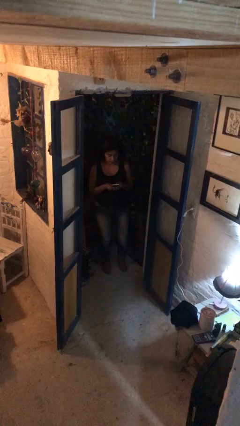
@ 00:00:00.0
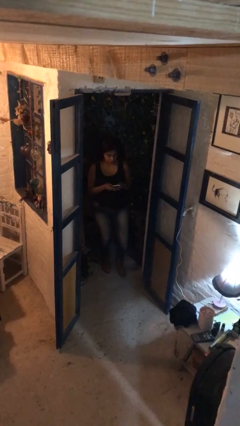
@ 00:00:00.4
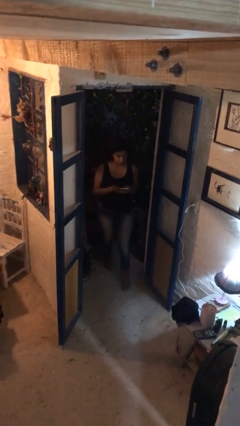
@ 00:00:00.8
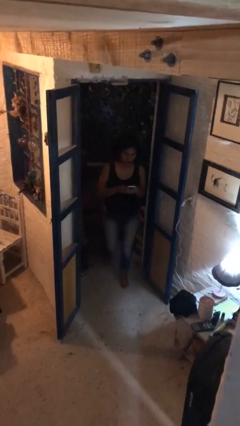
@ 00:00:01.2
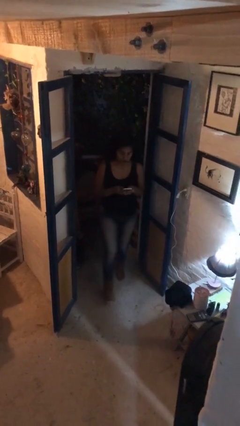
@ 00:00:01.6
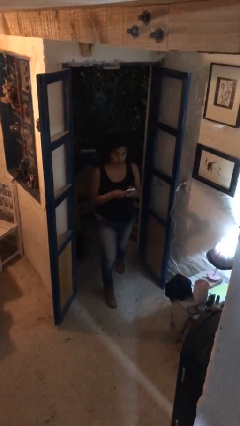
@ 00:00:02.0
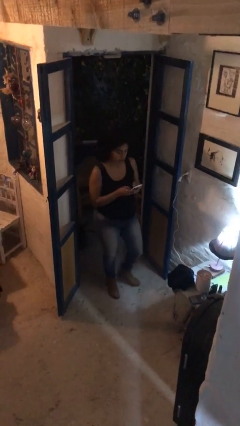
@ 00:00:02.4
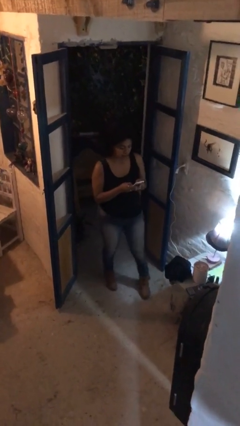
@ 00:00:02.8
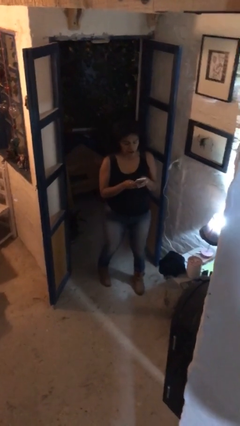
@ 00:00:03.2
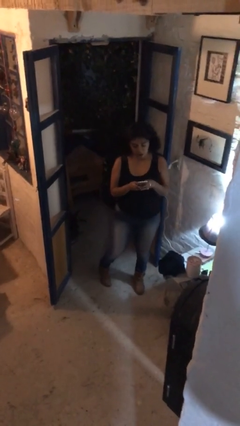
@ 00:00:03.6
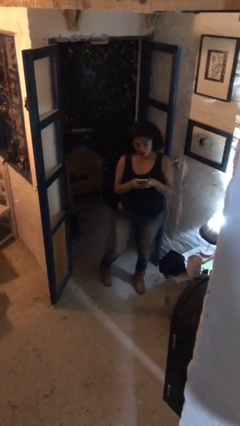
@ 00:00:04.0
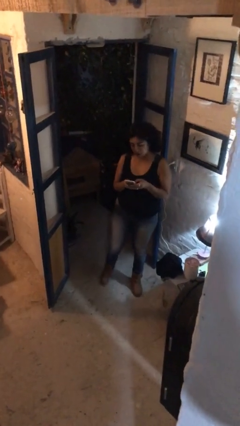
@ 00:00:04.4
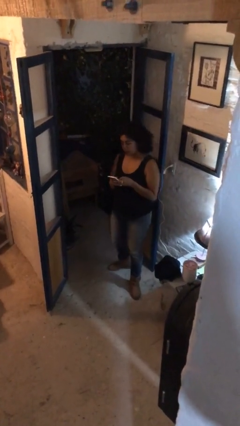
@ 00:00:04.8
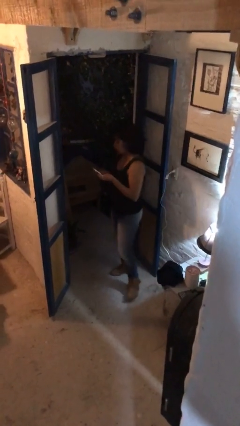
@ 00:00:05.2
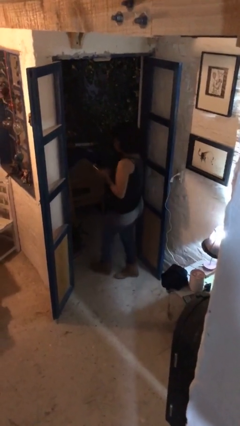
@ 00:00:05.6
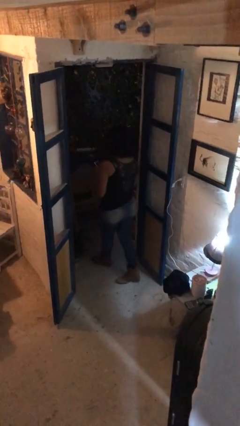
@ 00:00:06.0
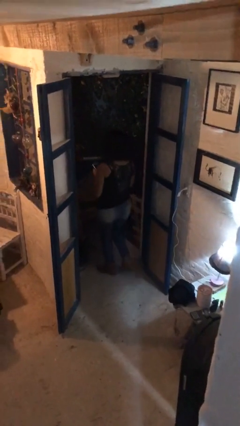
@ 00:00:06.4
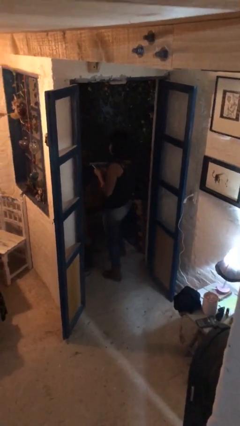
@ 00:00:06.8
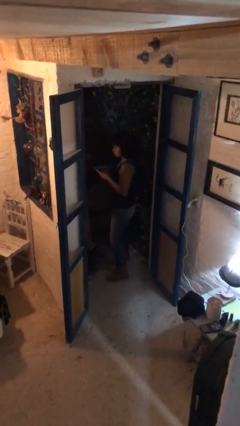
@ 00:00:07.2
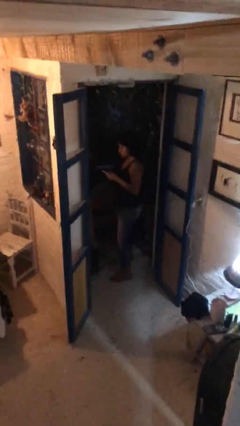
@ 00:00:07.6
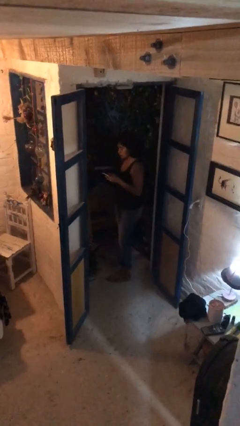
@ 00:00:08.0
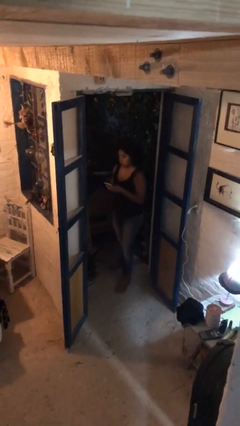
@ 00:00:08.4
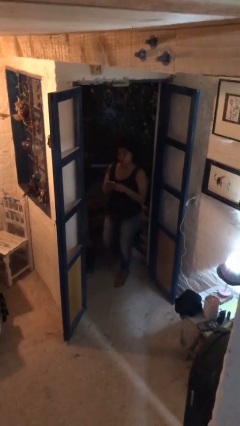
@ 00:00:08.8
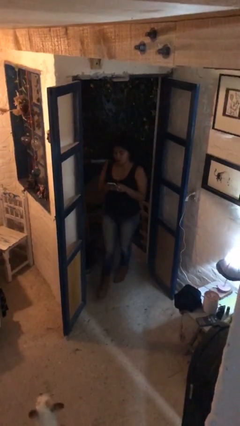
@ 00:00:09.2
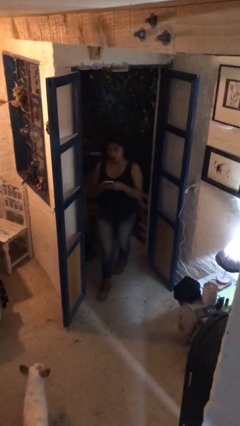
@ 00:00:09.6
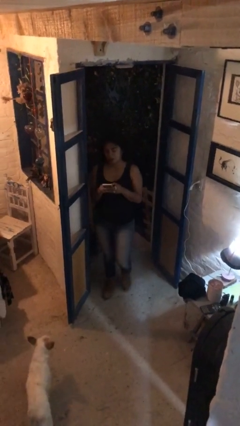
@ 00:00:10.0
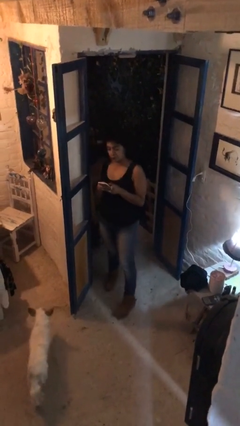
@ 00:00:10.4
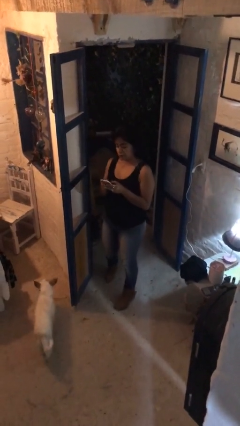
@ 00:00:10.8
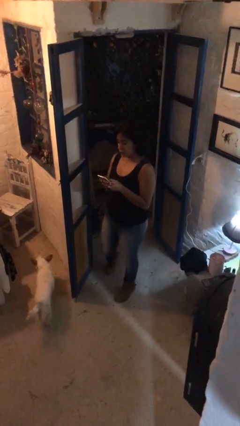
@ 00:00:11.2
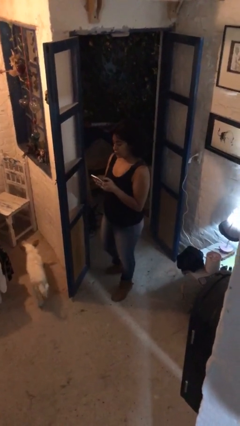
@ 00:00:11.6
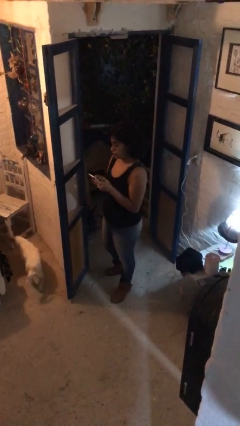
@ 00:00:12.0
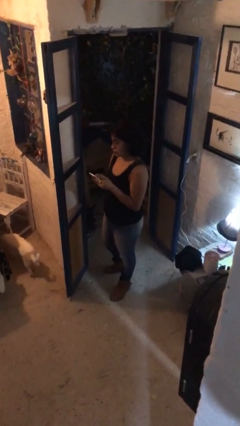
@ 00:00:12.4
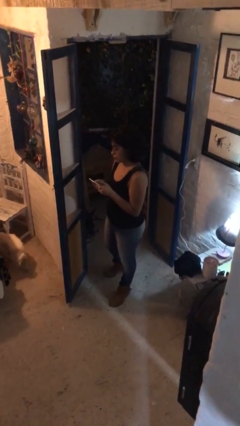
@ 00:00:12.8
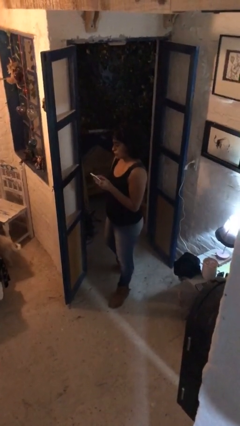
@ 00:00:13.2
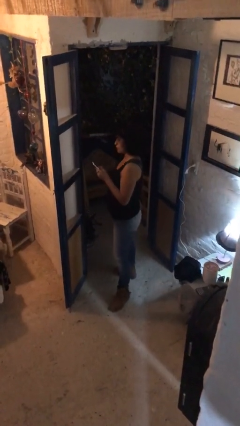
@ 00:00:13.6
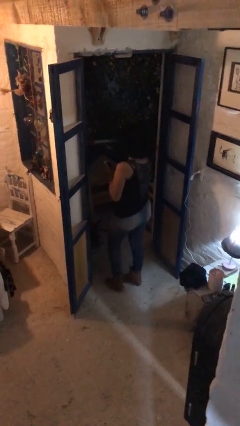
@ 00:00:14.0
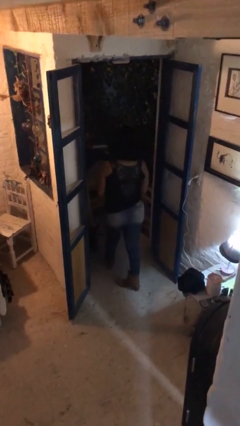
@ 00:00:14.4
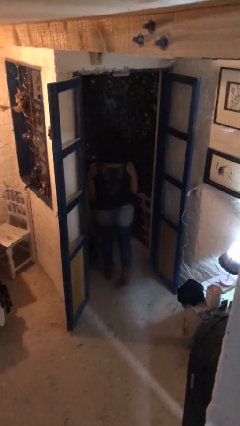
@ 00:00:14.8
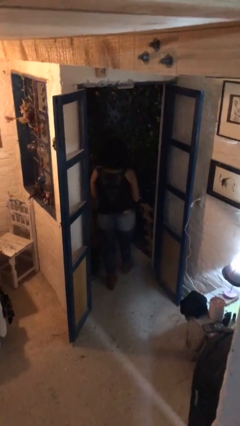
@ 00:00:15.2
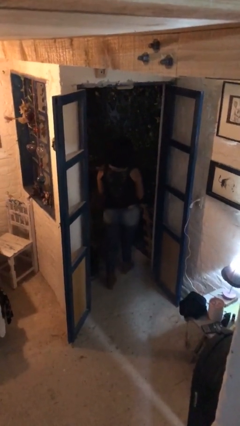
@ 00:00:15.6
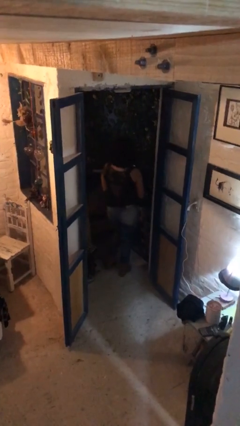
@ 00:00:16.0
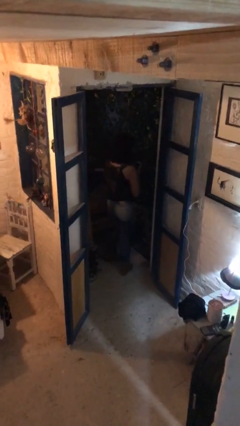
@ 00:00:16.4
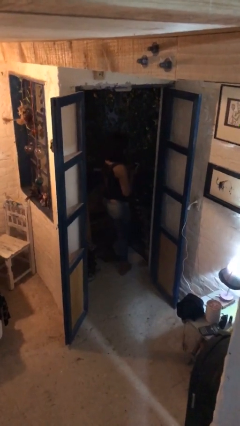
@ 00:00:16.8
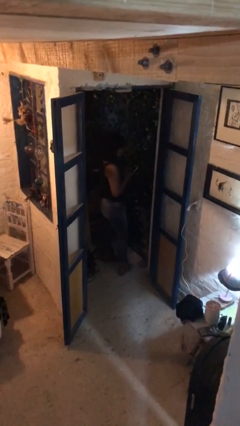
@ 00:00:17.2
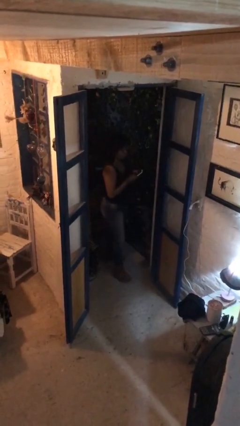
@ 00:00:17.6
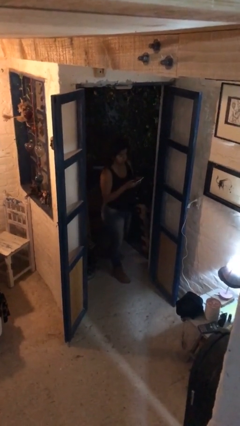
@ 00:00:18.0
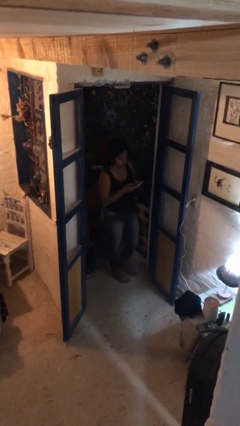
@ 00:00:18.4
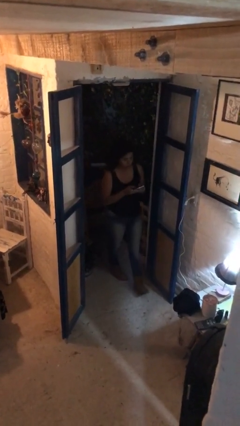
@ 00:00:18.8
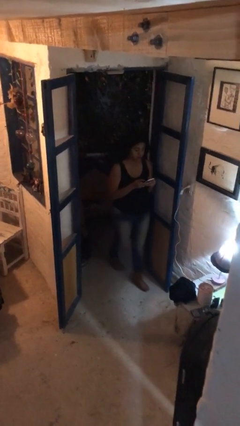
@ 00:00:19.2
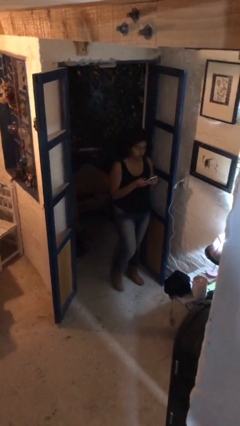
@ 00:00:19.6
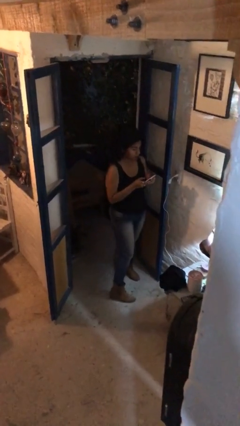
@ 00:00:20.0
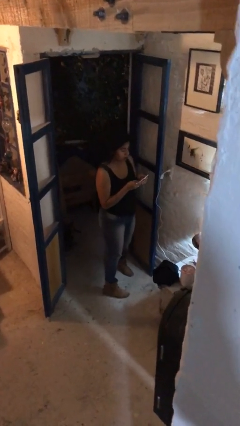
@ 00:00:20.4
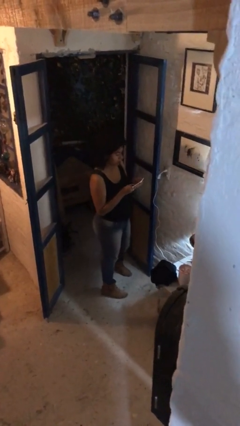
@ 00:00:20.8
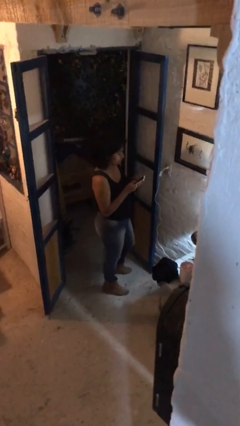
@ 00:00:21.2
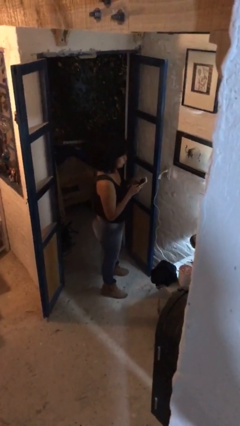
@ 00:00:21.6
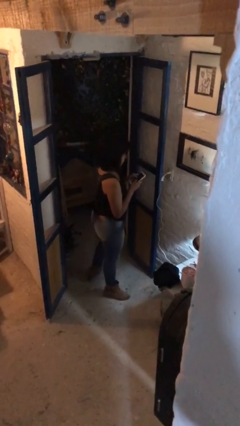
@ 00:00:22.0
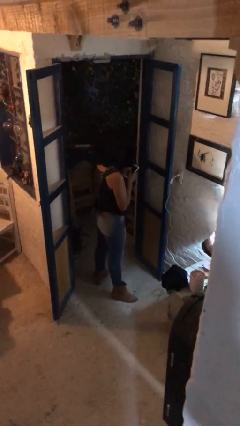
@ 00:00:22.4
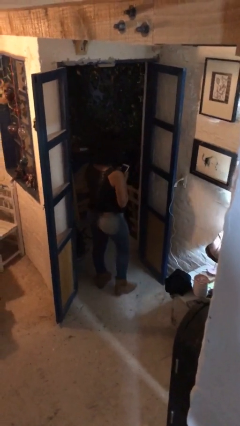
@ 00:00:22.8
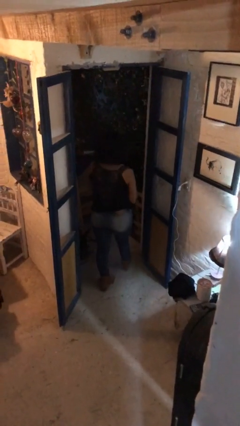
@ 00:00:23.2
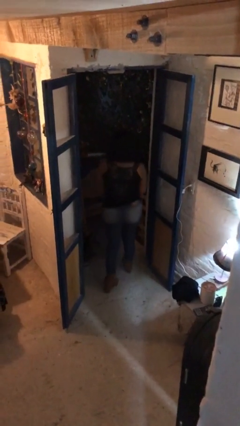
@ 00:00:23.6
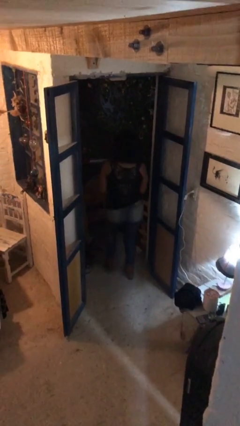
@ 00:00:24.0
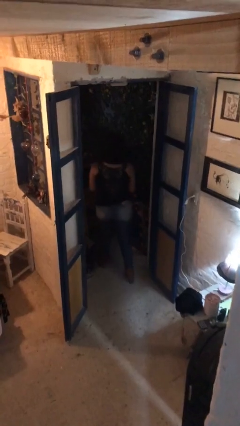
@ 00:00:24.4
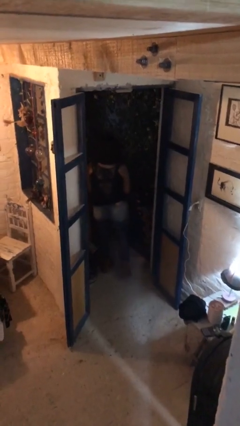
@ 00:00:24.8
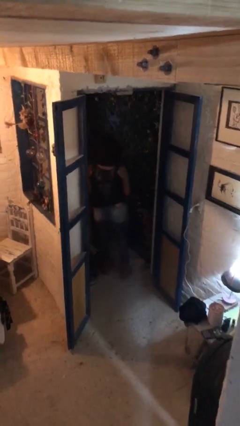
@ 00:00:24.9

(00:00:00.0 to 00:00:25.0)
person texts on phone

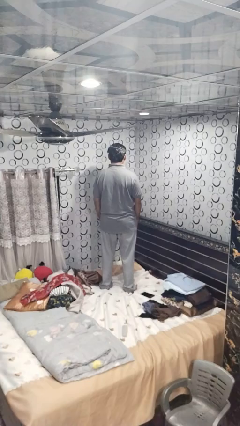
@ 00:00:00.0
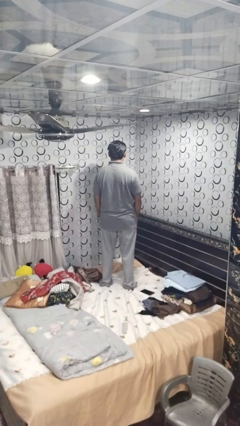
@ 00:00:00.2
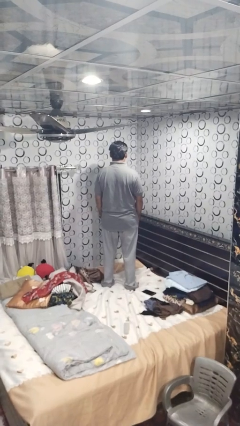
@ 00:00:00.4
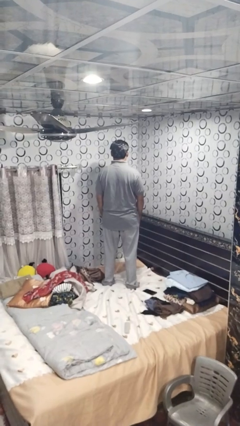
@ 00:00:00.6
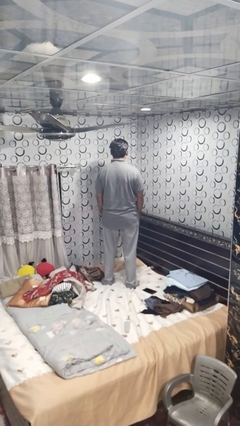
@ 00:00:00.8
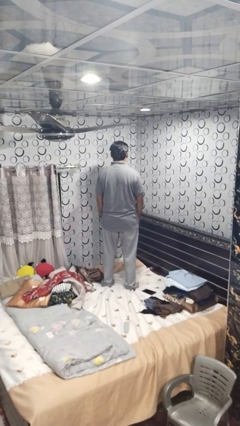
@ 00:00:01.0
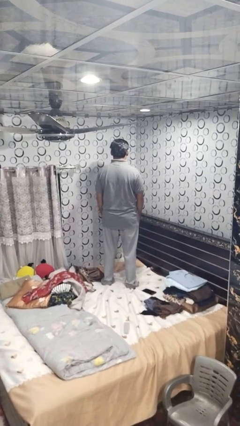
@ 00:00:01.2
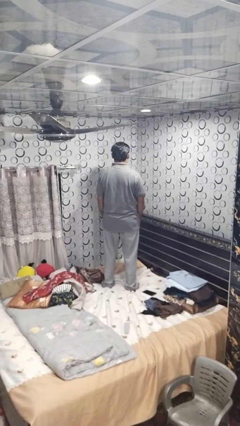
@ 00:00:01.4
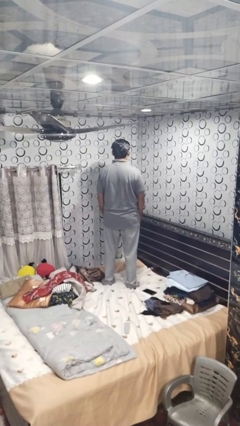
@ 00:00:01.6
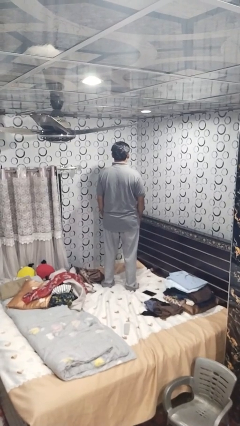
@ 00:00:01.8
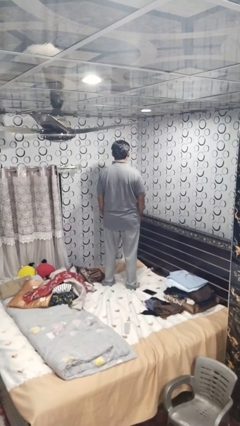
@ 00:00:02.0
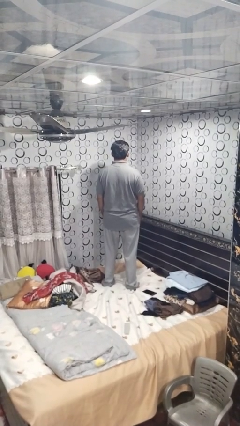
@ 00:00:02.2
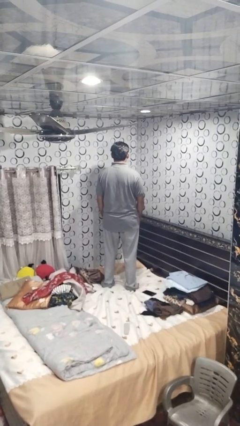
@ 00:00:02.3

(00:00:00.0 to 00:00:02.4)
person jumps on bed

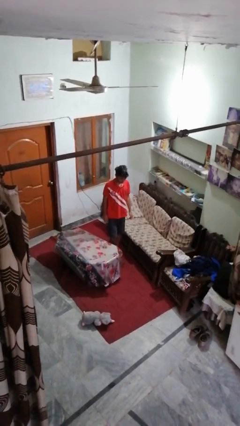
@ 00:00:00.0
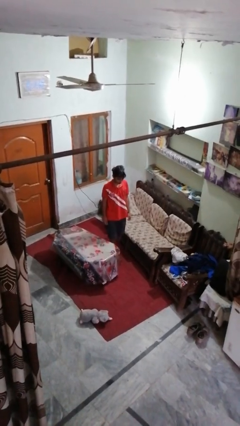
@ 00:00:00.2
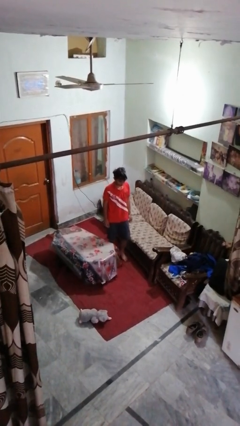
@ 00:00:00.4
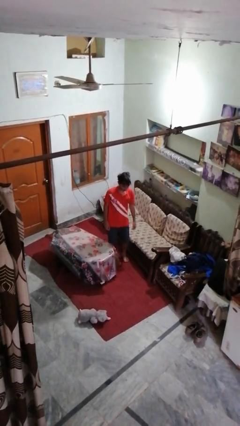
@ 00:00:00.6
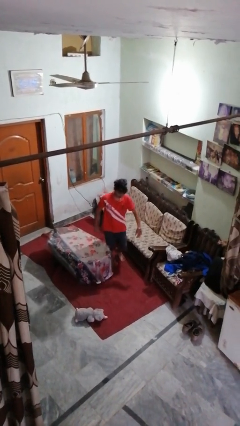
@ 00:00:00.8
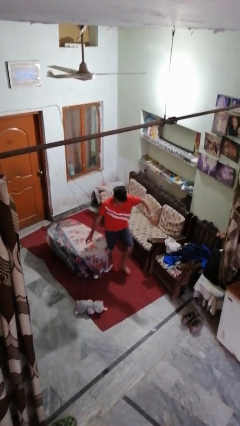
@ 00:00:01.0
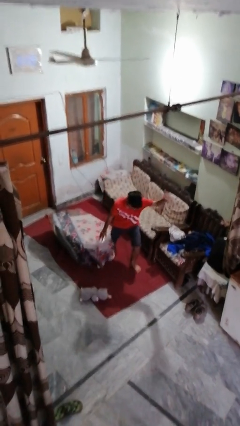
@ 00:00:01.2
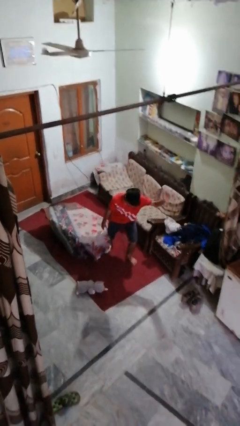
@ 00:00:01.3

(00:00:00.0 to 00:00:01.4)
person trips on object on floor

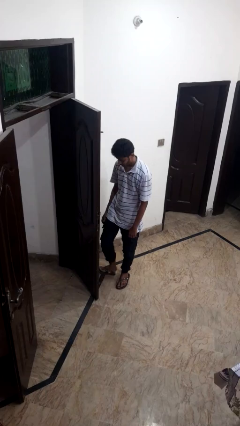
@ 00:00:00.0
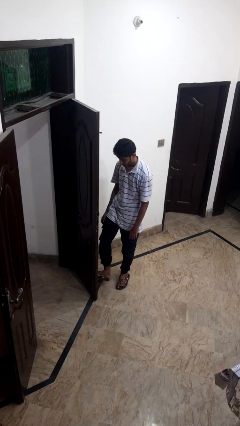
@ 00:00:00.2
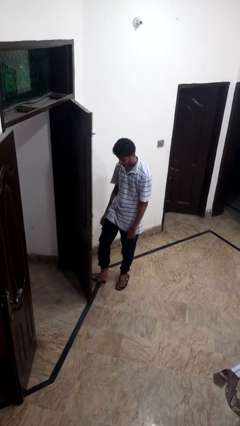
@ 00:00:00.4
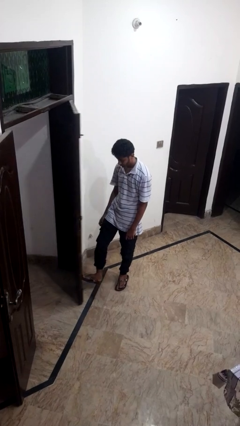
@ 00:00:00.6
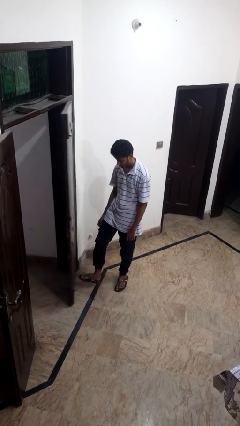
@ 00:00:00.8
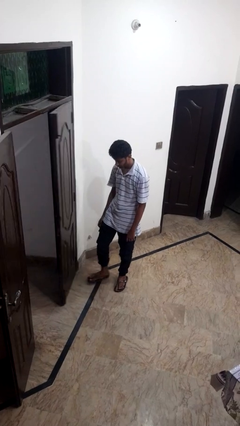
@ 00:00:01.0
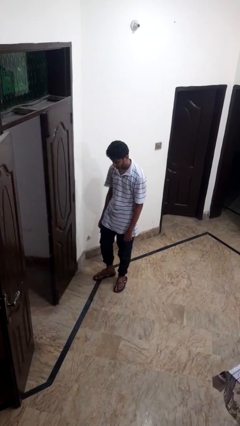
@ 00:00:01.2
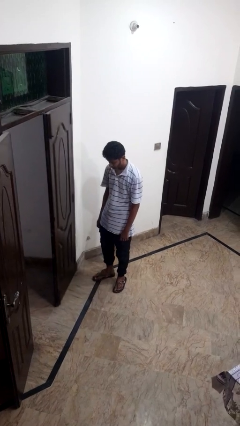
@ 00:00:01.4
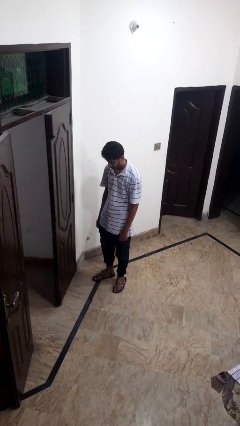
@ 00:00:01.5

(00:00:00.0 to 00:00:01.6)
person closes door with foot
